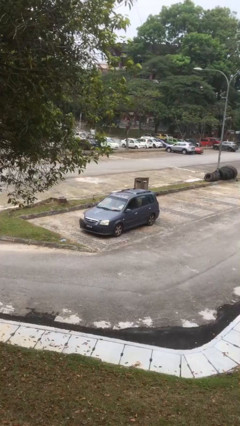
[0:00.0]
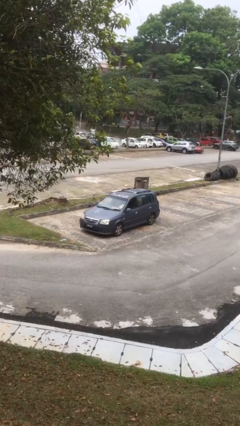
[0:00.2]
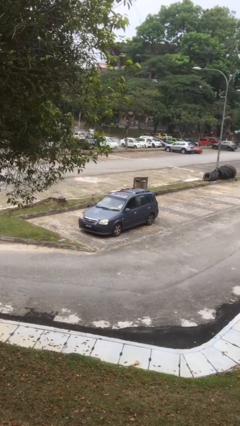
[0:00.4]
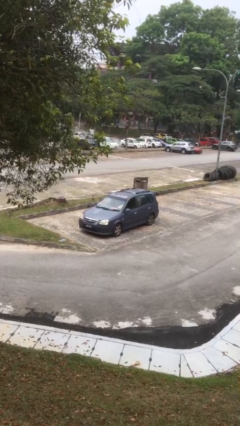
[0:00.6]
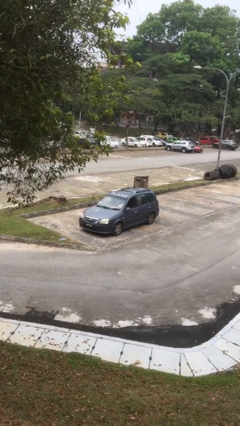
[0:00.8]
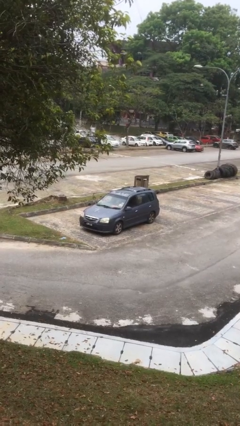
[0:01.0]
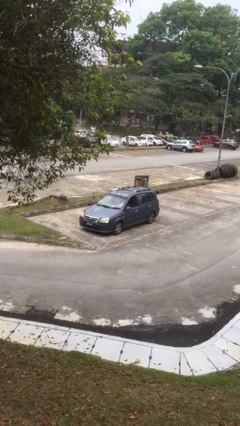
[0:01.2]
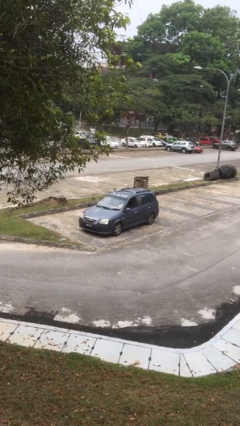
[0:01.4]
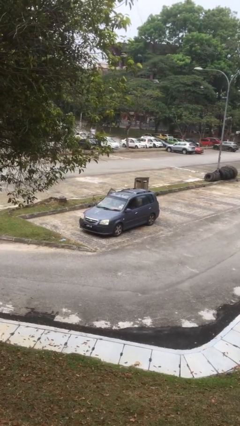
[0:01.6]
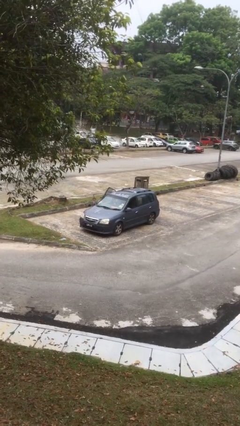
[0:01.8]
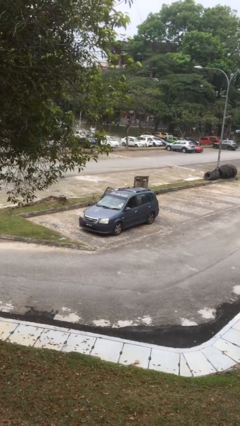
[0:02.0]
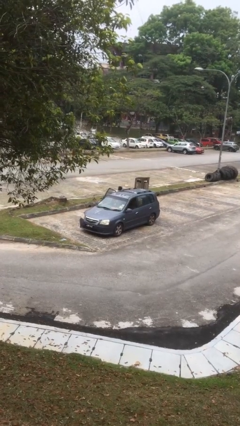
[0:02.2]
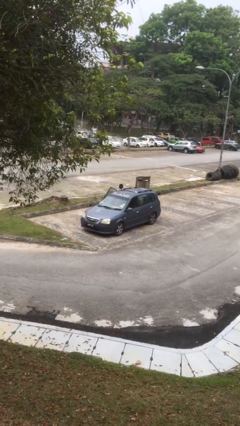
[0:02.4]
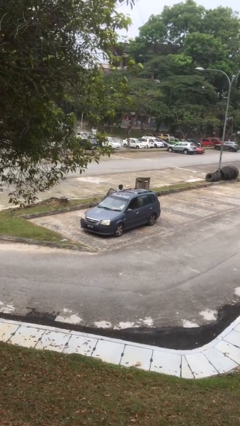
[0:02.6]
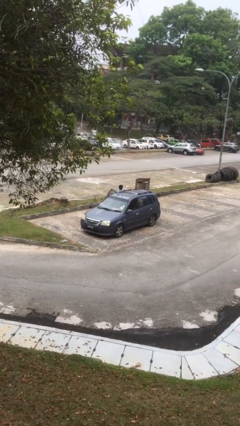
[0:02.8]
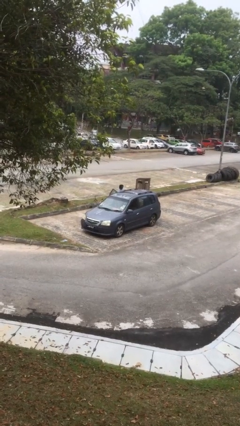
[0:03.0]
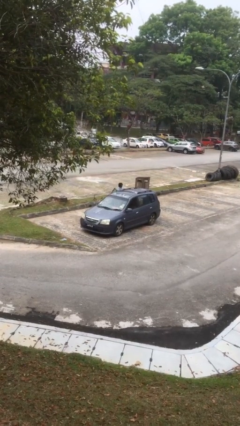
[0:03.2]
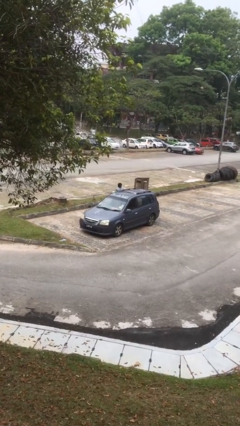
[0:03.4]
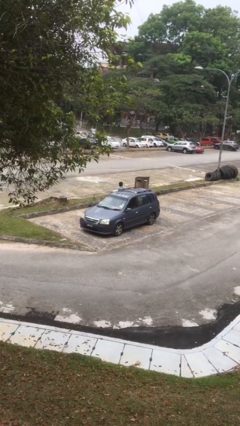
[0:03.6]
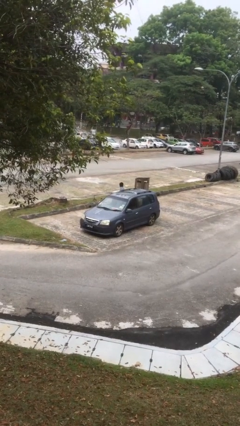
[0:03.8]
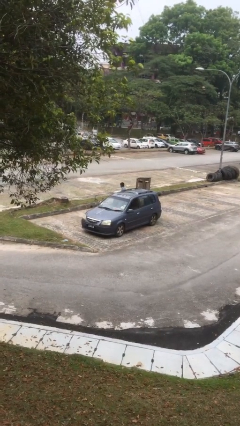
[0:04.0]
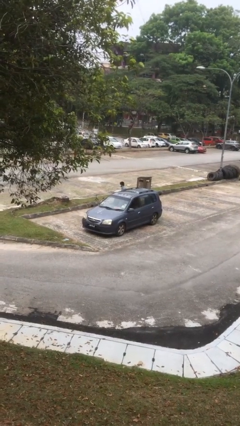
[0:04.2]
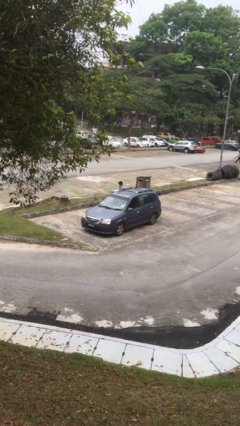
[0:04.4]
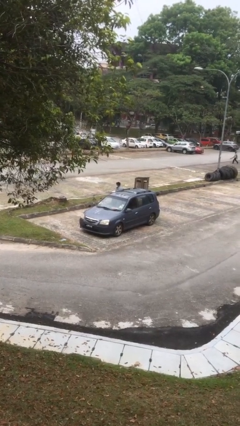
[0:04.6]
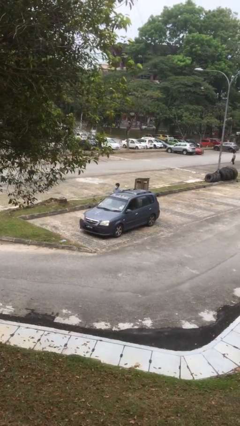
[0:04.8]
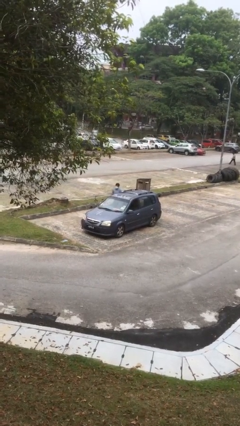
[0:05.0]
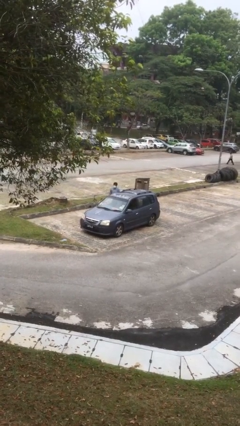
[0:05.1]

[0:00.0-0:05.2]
car drops off person

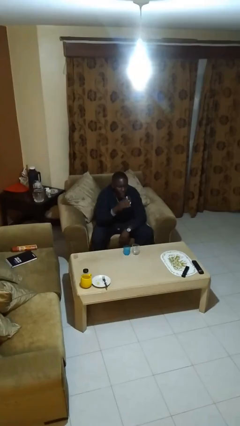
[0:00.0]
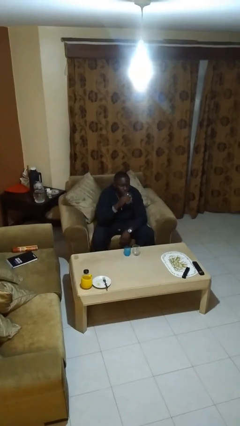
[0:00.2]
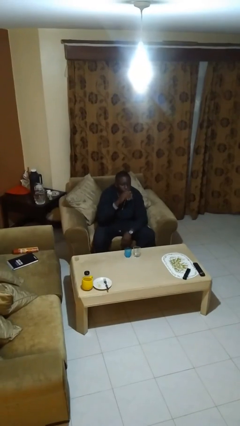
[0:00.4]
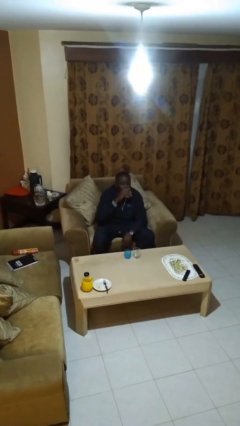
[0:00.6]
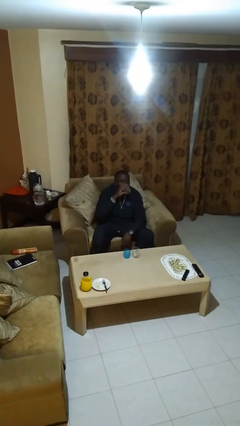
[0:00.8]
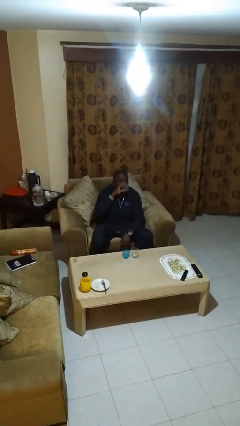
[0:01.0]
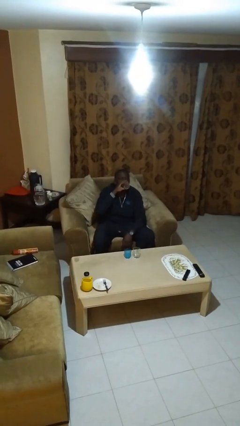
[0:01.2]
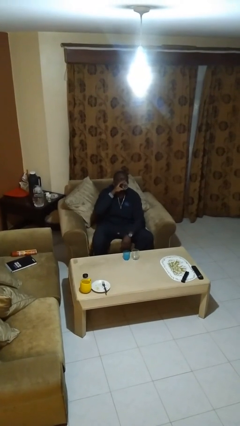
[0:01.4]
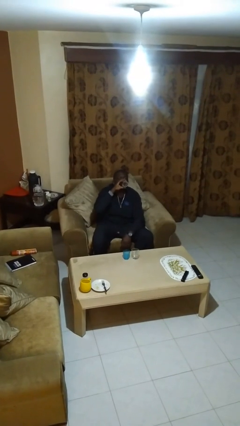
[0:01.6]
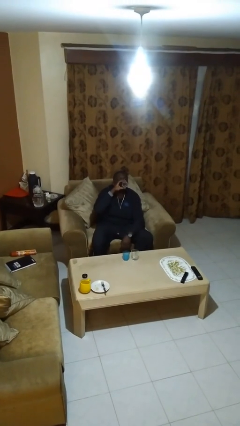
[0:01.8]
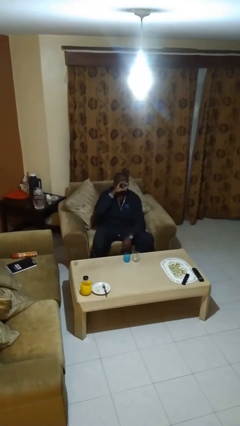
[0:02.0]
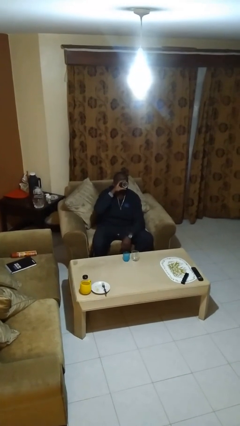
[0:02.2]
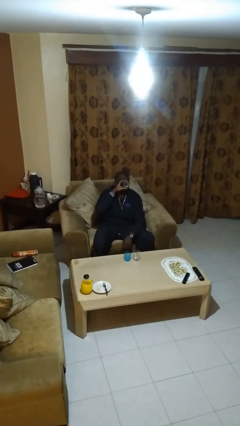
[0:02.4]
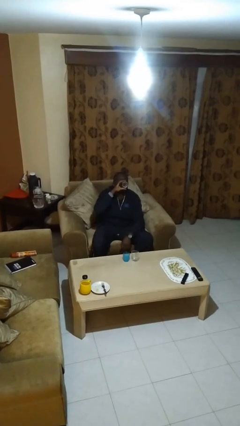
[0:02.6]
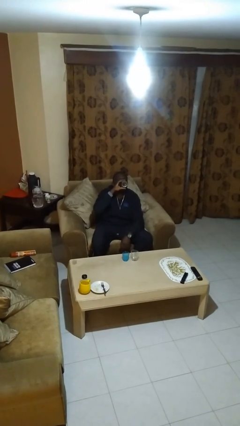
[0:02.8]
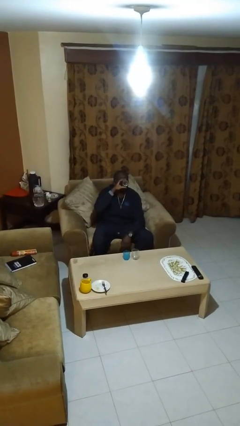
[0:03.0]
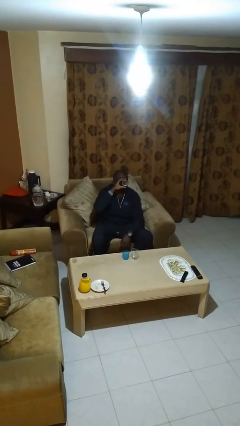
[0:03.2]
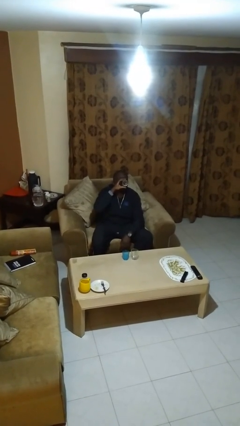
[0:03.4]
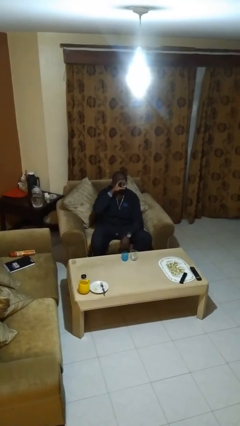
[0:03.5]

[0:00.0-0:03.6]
person drinks from shotglass

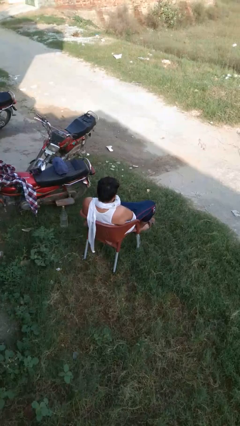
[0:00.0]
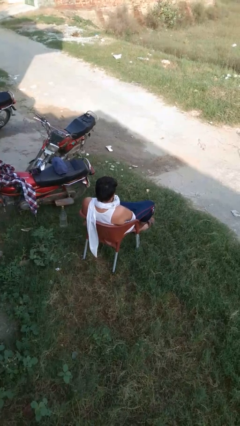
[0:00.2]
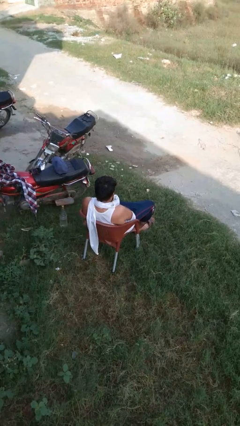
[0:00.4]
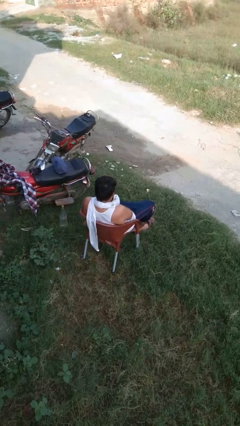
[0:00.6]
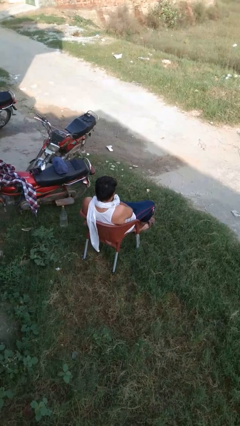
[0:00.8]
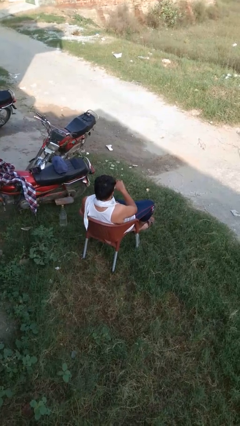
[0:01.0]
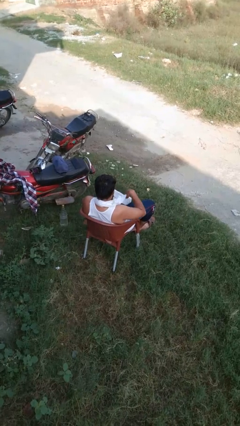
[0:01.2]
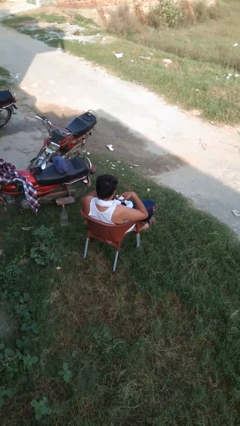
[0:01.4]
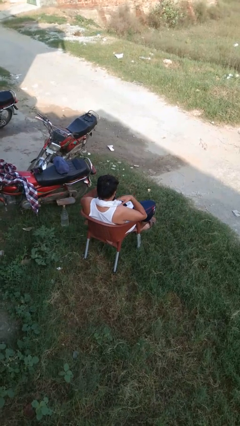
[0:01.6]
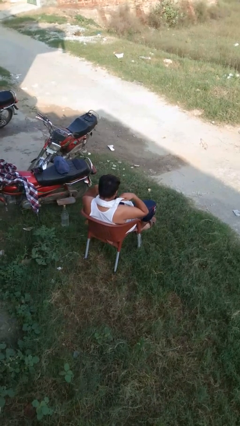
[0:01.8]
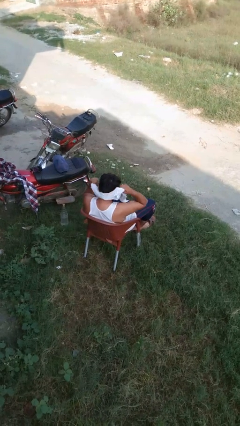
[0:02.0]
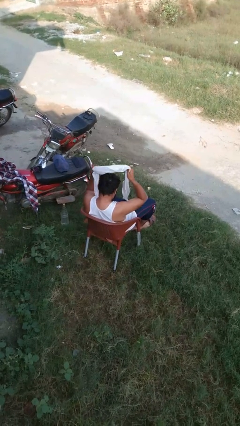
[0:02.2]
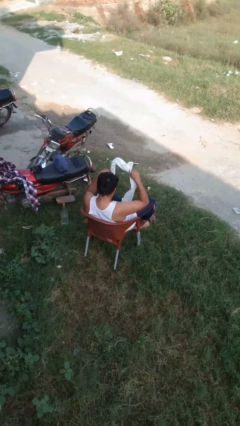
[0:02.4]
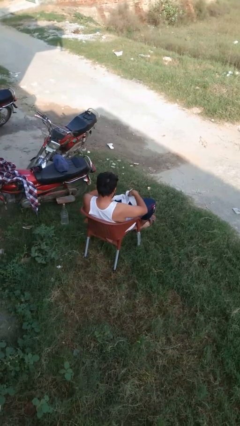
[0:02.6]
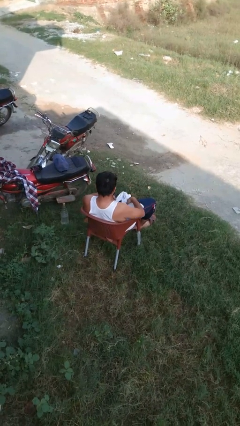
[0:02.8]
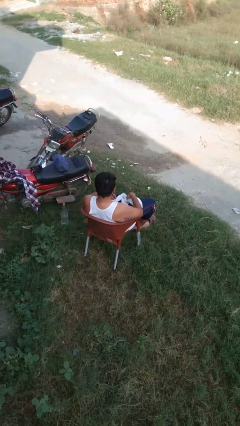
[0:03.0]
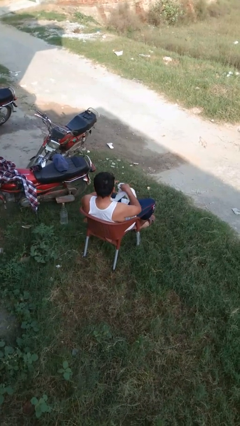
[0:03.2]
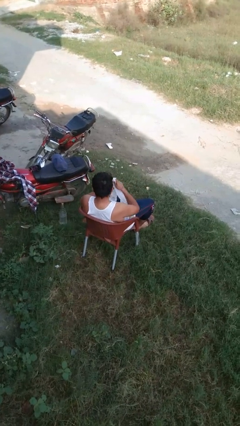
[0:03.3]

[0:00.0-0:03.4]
person takes off scarf

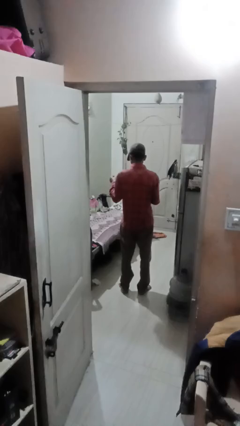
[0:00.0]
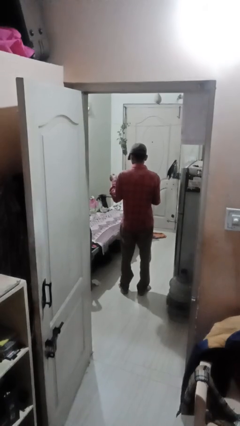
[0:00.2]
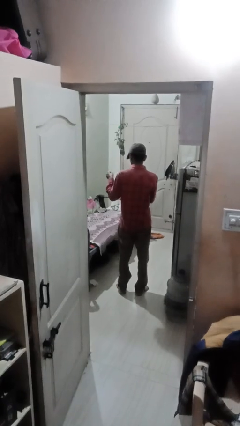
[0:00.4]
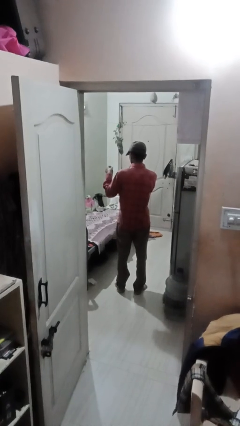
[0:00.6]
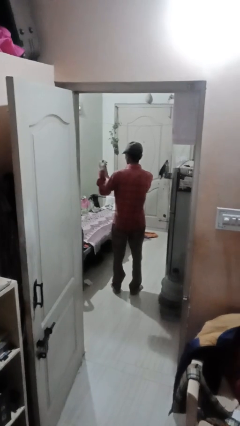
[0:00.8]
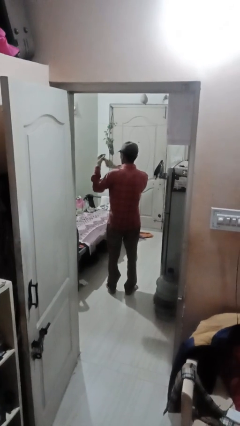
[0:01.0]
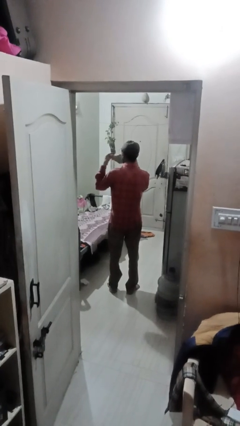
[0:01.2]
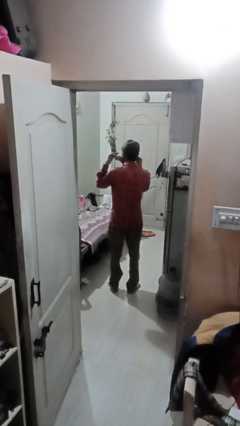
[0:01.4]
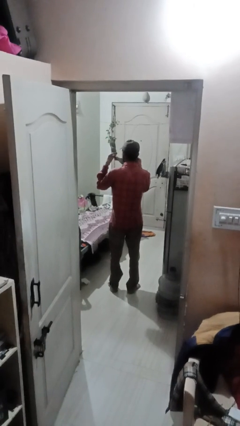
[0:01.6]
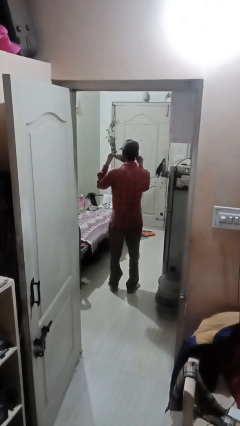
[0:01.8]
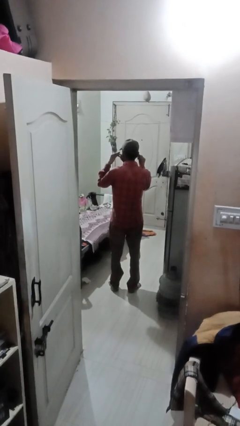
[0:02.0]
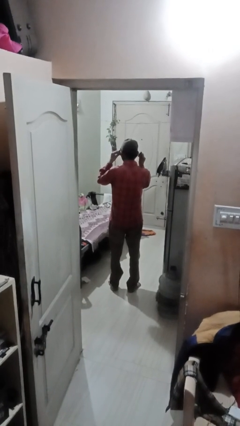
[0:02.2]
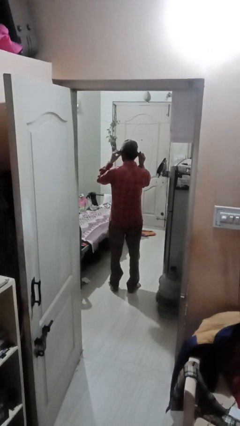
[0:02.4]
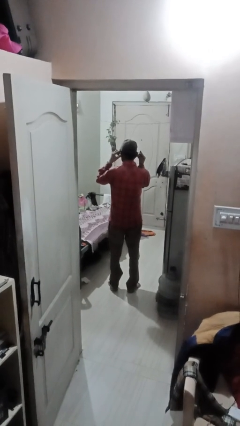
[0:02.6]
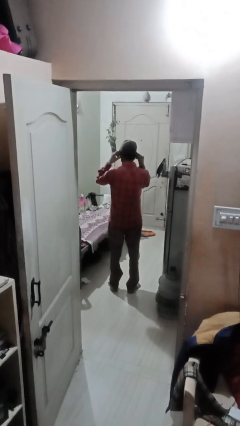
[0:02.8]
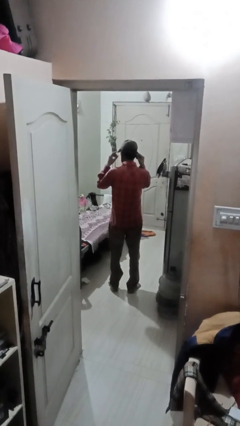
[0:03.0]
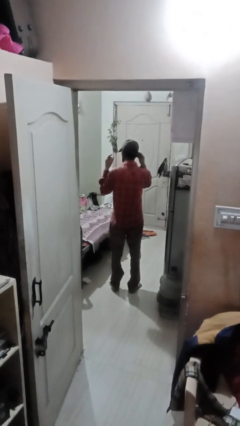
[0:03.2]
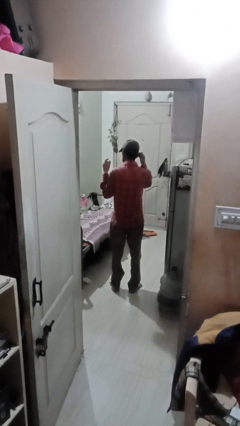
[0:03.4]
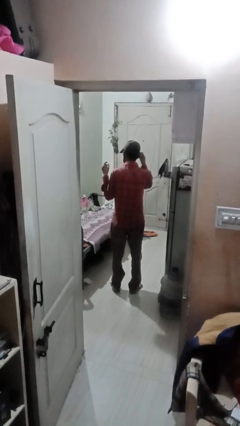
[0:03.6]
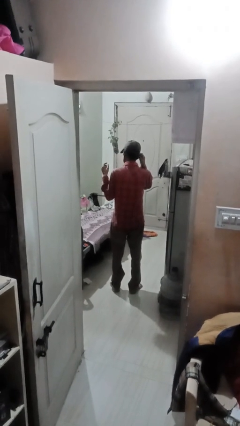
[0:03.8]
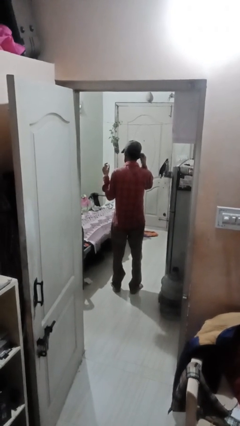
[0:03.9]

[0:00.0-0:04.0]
person puts on facemask

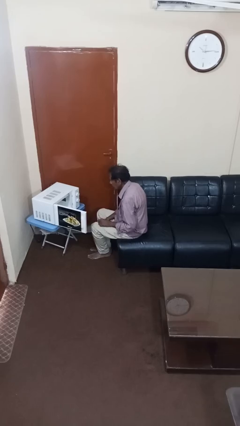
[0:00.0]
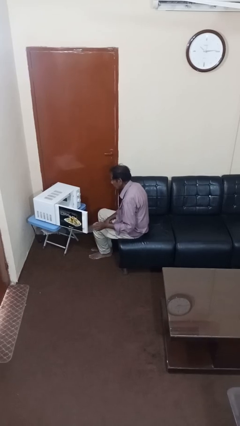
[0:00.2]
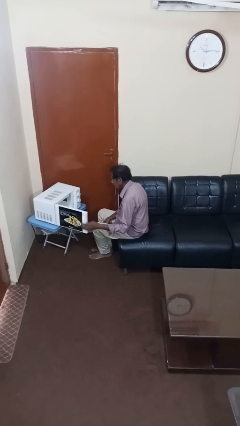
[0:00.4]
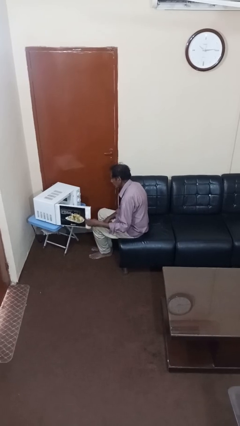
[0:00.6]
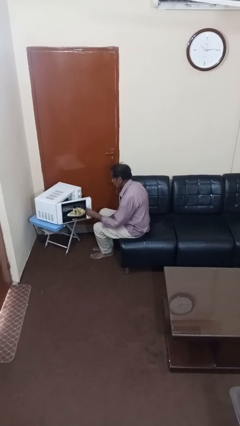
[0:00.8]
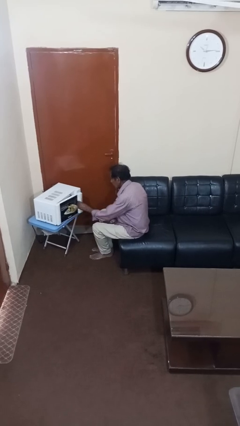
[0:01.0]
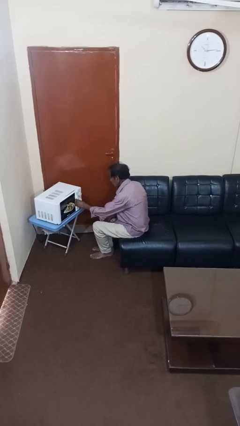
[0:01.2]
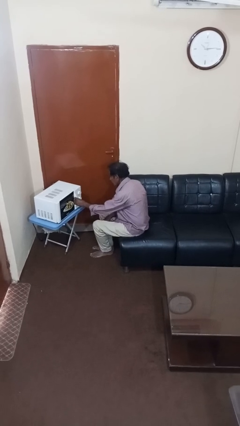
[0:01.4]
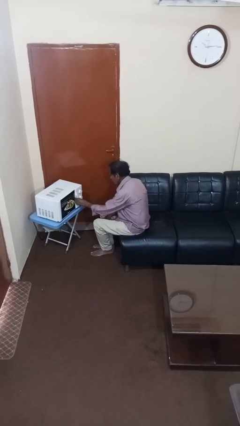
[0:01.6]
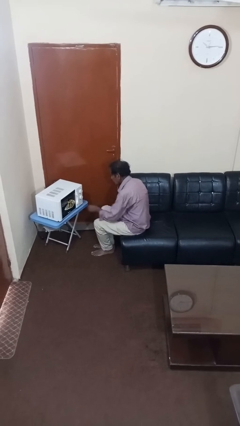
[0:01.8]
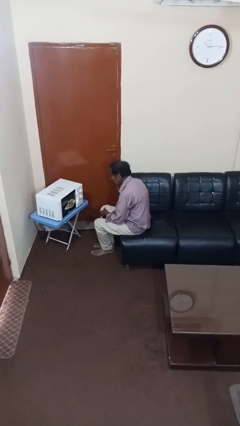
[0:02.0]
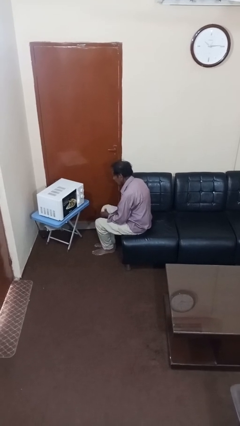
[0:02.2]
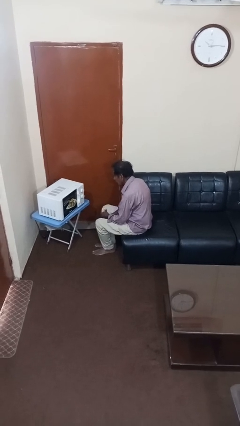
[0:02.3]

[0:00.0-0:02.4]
person closes microwave
